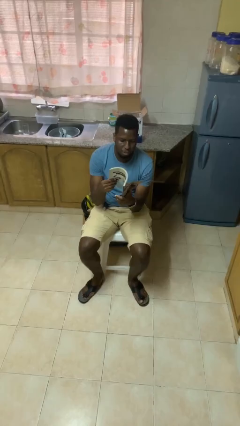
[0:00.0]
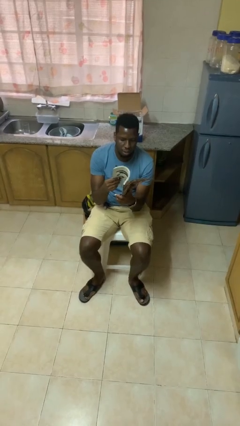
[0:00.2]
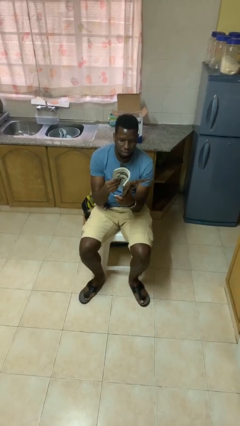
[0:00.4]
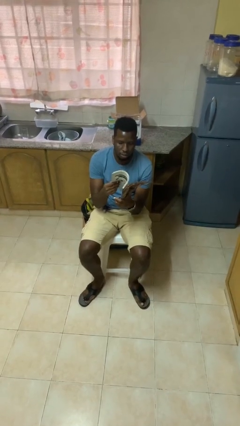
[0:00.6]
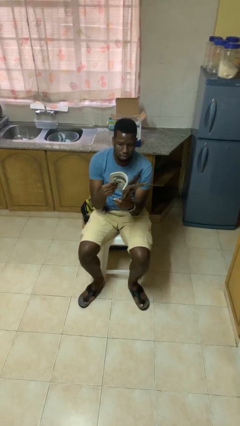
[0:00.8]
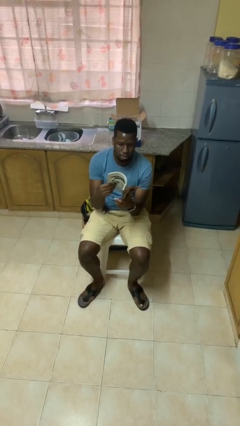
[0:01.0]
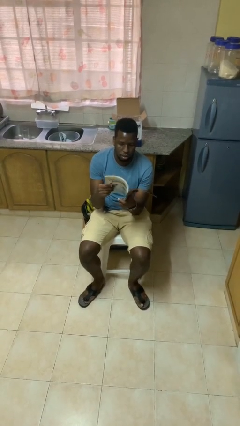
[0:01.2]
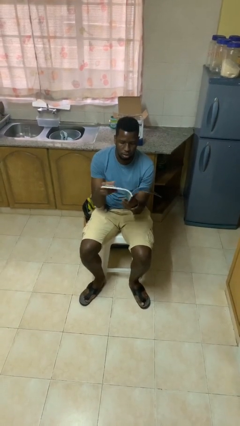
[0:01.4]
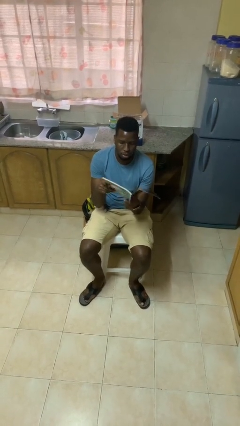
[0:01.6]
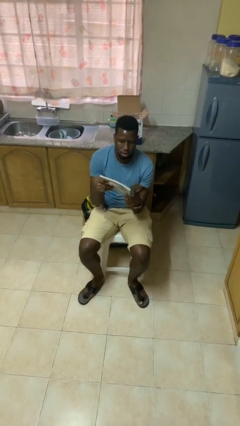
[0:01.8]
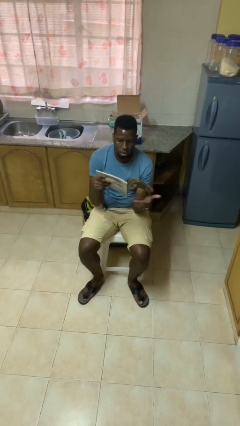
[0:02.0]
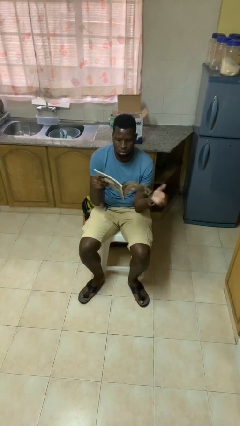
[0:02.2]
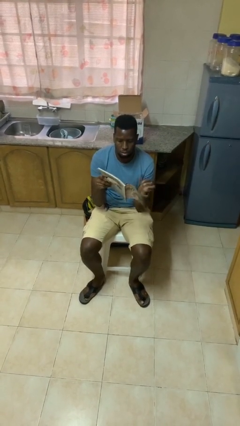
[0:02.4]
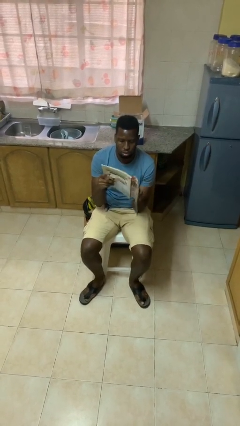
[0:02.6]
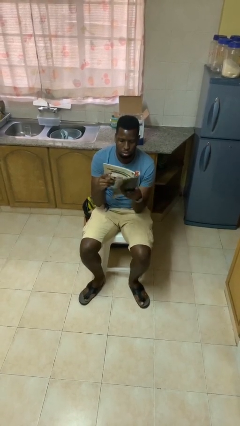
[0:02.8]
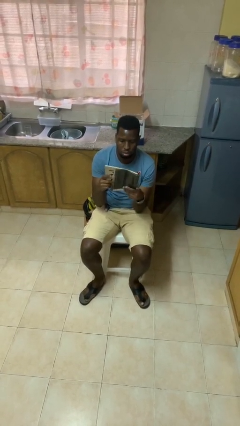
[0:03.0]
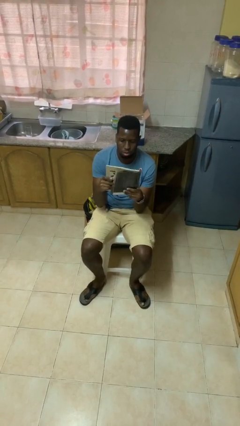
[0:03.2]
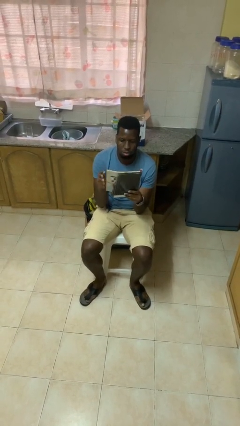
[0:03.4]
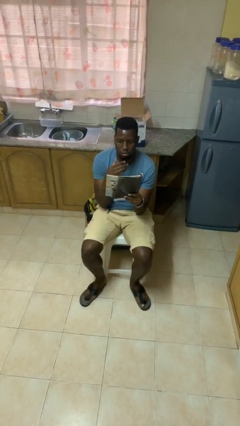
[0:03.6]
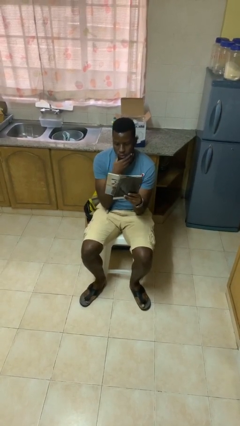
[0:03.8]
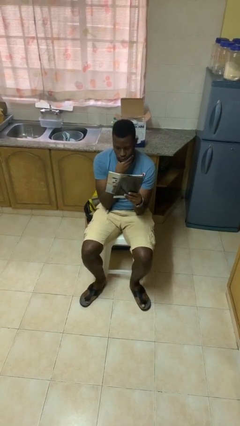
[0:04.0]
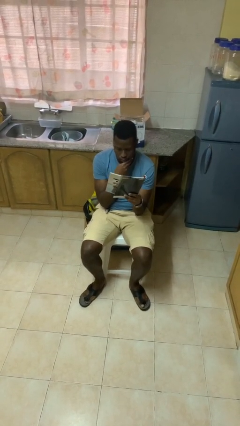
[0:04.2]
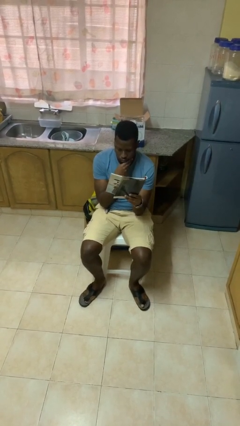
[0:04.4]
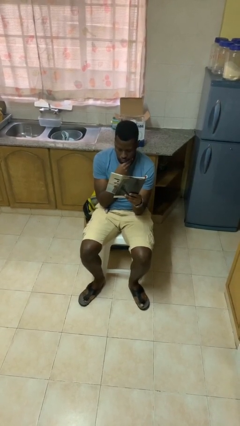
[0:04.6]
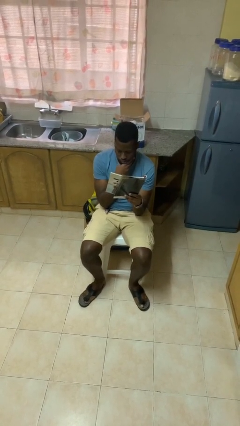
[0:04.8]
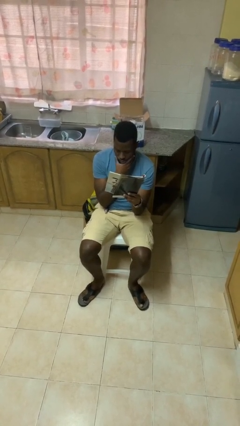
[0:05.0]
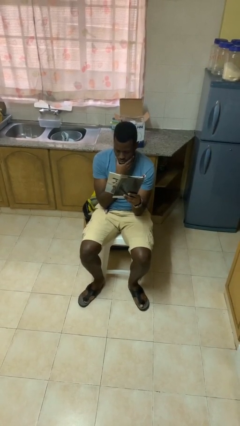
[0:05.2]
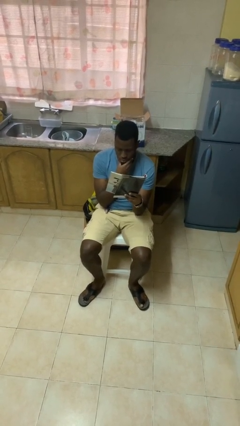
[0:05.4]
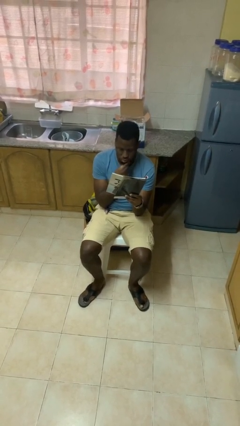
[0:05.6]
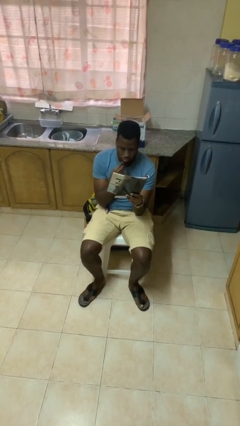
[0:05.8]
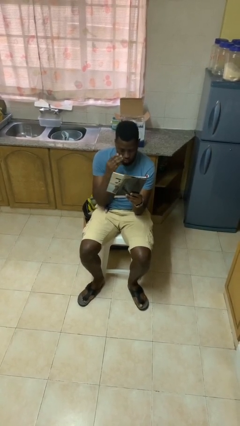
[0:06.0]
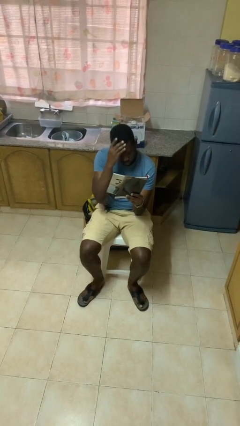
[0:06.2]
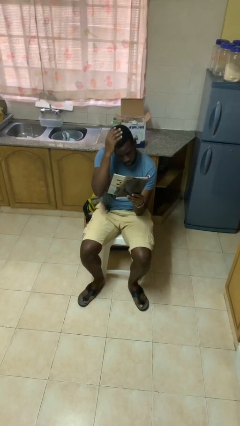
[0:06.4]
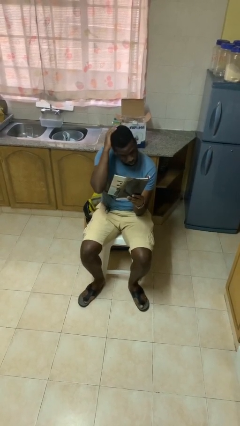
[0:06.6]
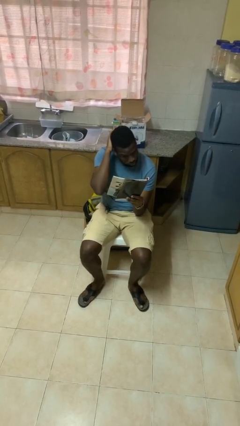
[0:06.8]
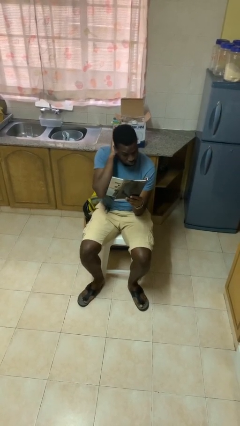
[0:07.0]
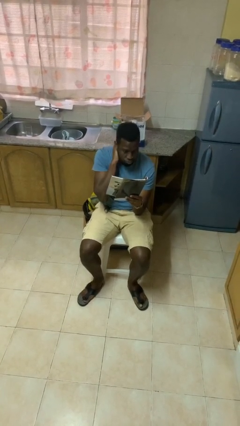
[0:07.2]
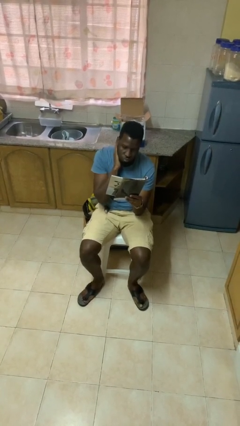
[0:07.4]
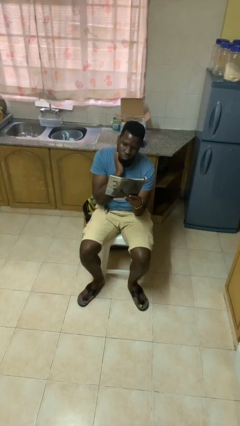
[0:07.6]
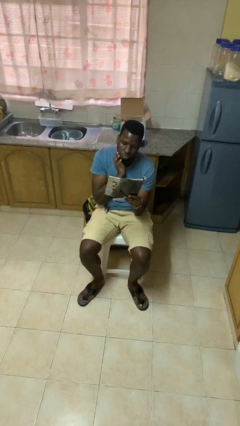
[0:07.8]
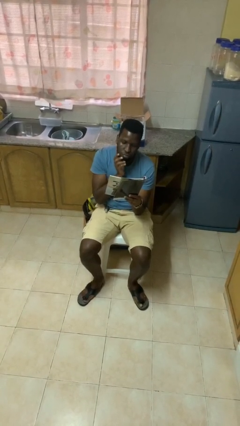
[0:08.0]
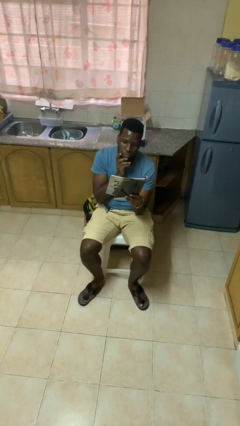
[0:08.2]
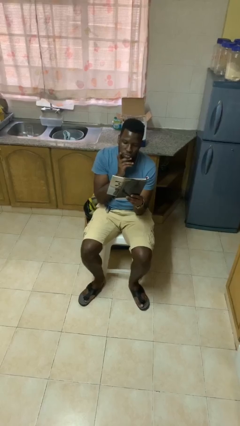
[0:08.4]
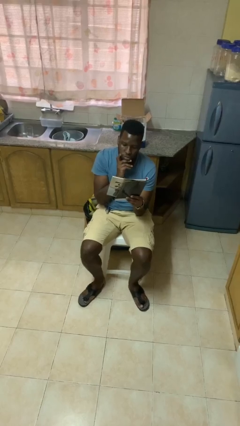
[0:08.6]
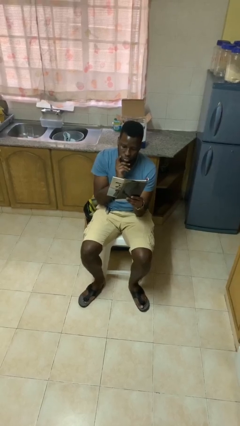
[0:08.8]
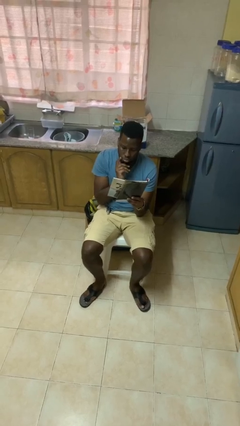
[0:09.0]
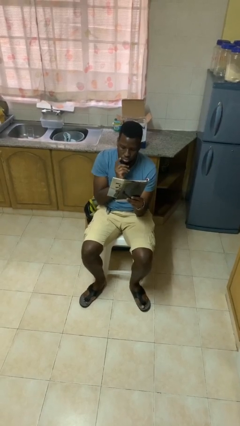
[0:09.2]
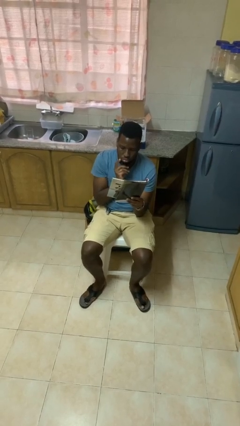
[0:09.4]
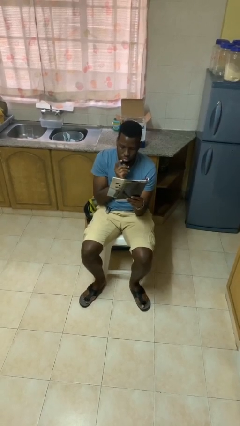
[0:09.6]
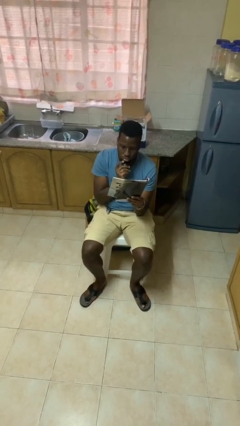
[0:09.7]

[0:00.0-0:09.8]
person reads document

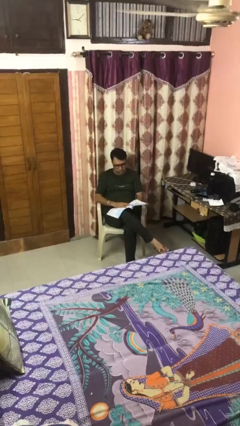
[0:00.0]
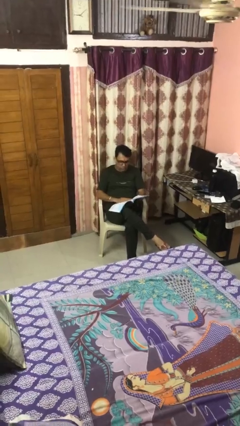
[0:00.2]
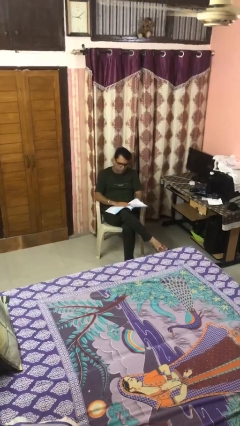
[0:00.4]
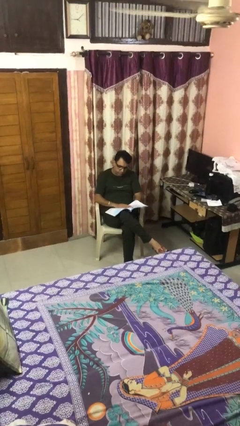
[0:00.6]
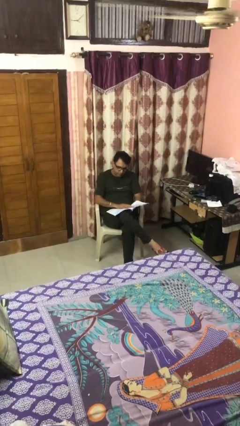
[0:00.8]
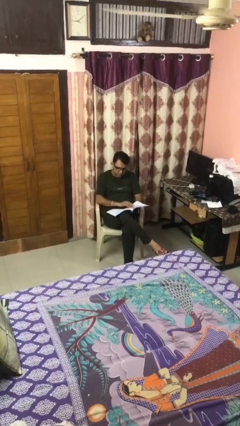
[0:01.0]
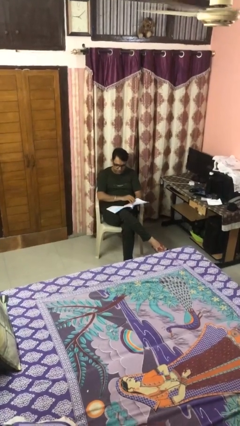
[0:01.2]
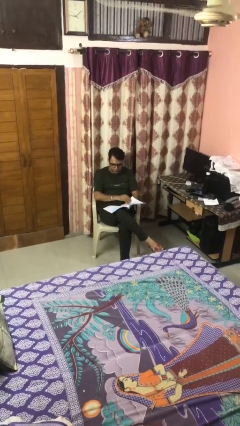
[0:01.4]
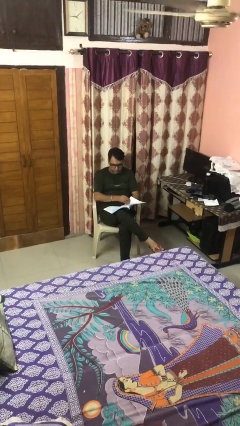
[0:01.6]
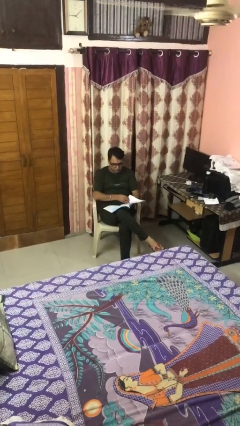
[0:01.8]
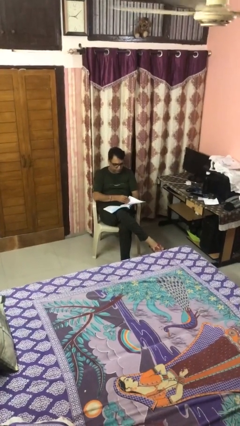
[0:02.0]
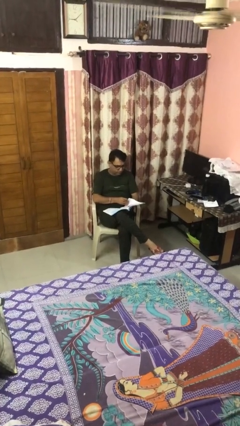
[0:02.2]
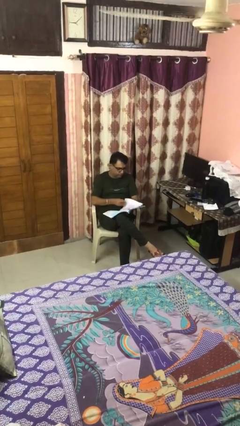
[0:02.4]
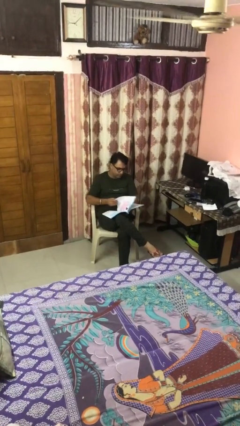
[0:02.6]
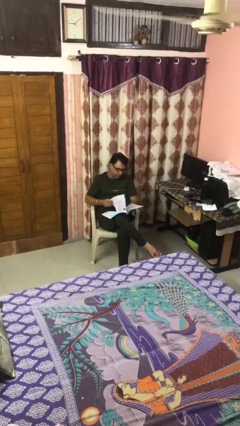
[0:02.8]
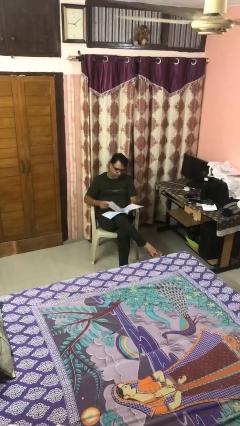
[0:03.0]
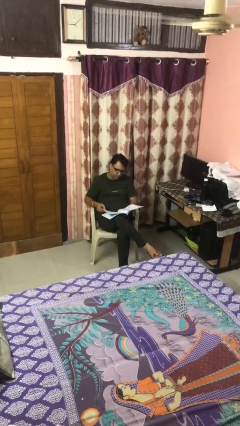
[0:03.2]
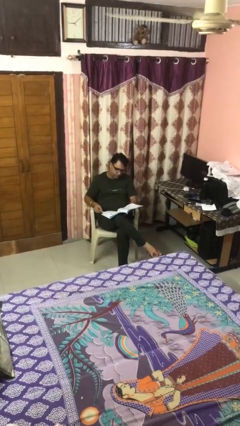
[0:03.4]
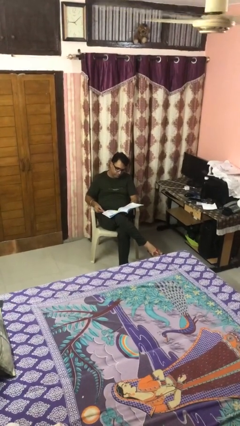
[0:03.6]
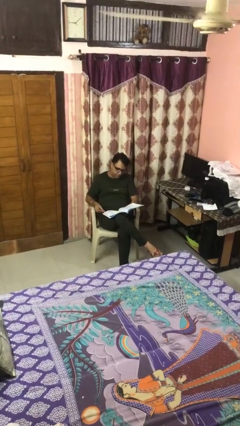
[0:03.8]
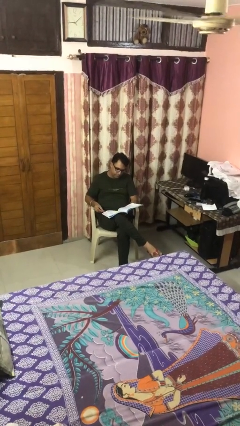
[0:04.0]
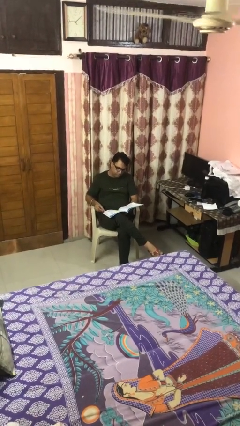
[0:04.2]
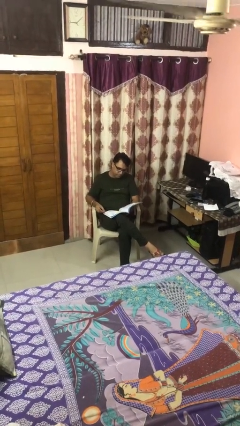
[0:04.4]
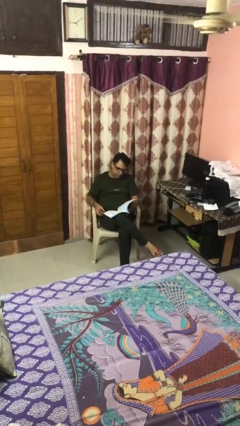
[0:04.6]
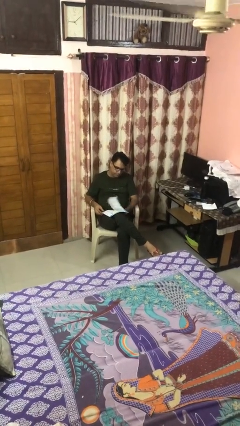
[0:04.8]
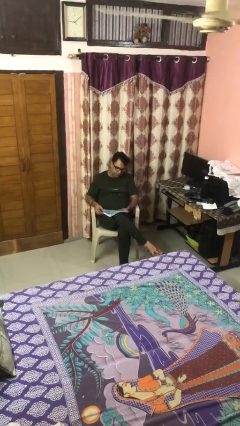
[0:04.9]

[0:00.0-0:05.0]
person reads book

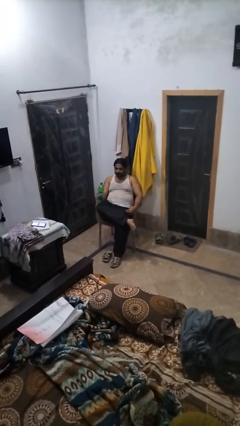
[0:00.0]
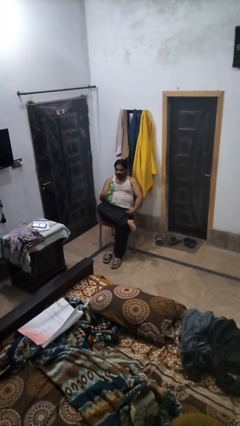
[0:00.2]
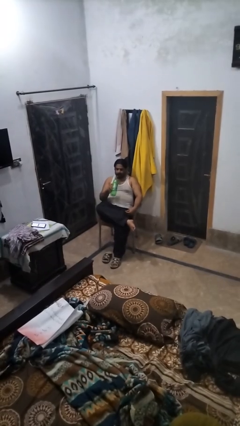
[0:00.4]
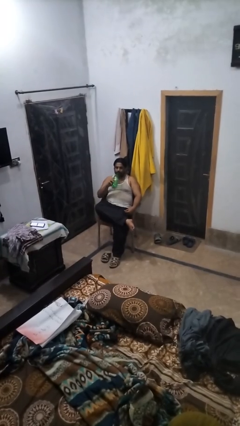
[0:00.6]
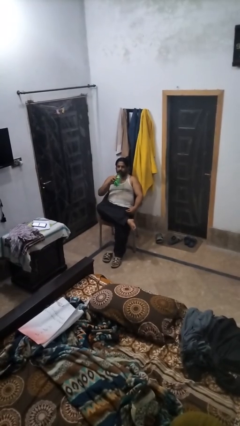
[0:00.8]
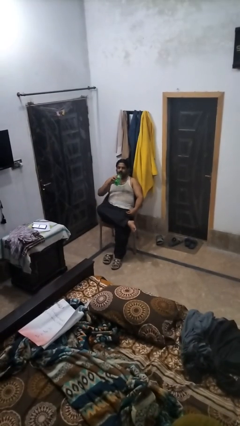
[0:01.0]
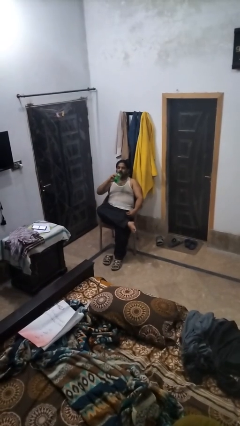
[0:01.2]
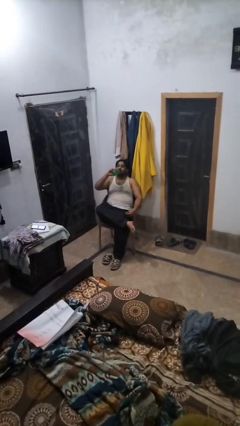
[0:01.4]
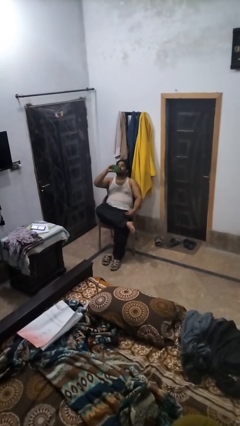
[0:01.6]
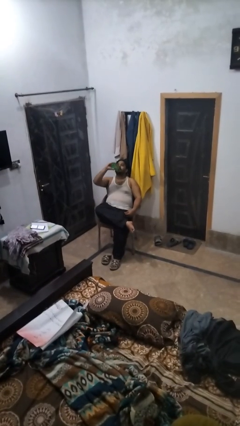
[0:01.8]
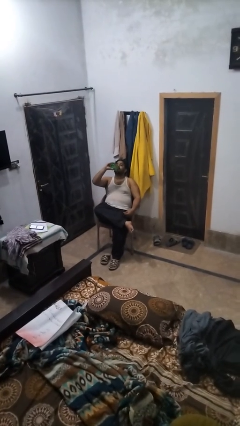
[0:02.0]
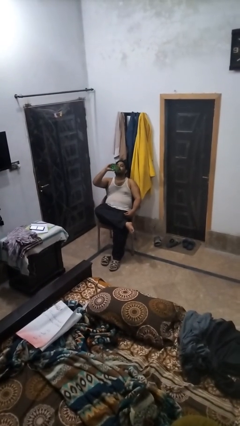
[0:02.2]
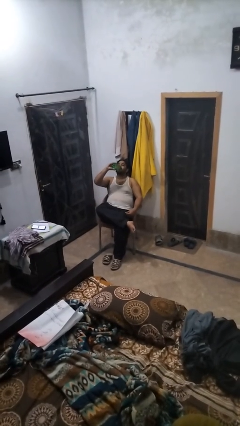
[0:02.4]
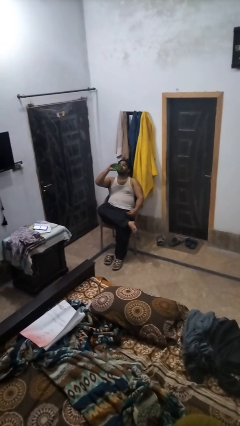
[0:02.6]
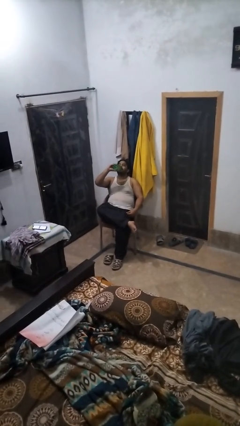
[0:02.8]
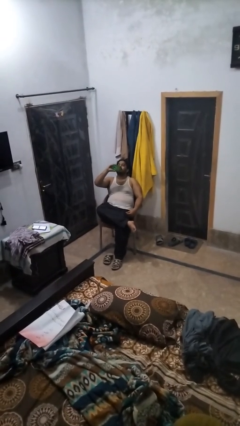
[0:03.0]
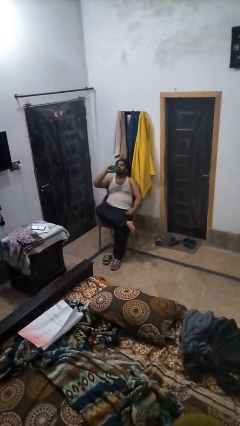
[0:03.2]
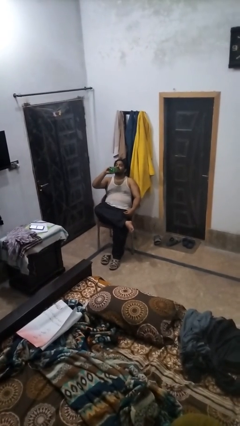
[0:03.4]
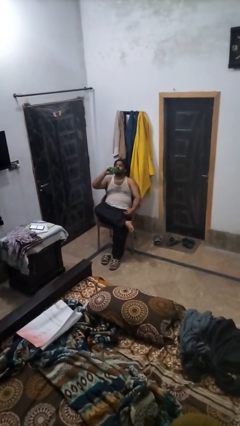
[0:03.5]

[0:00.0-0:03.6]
person drinks from bottle
